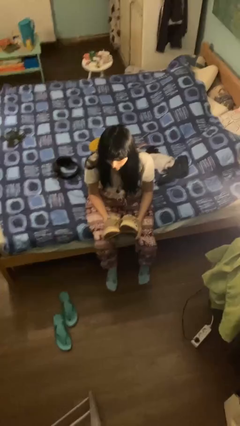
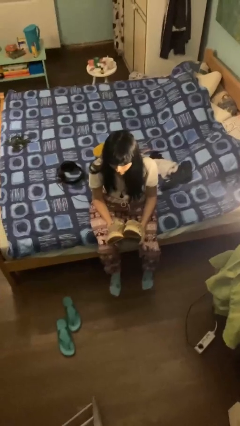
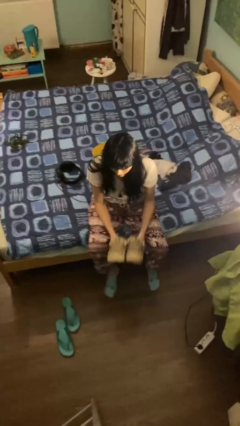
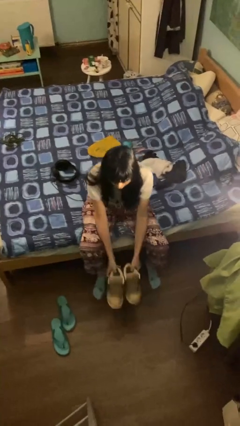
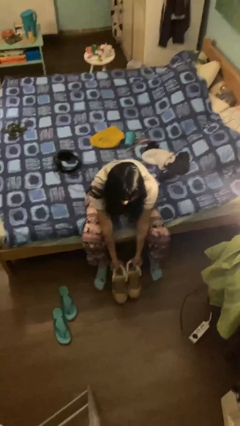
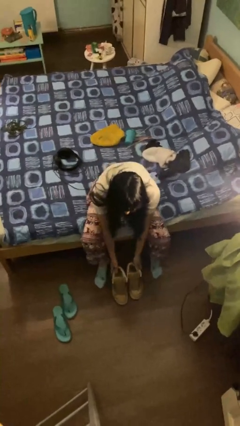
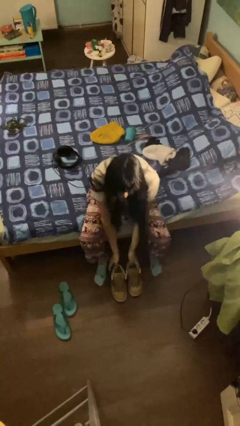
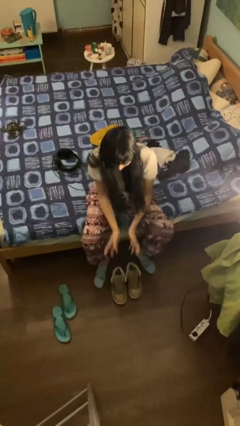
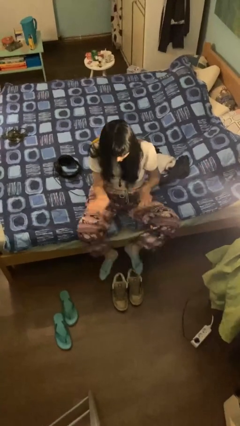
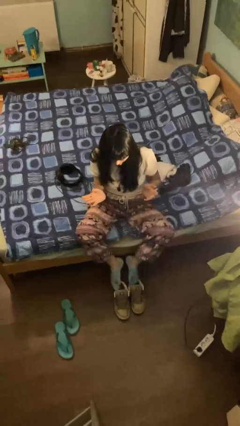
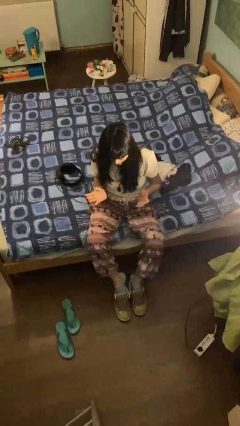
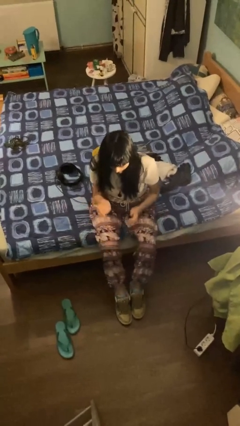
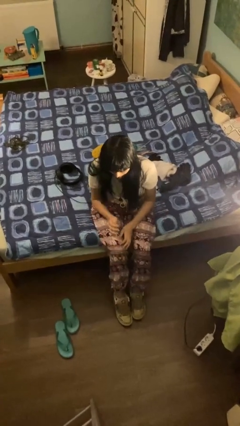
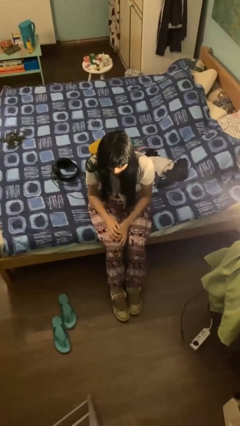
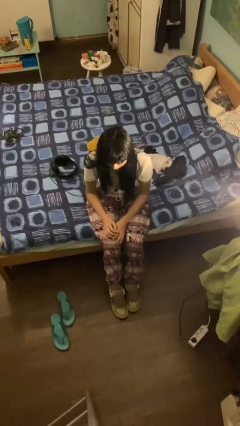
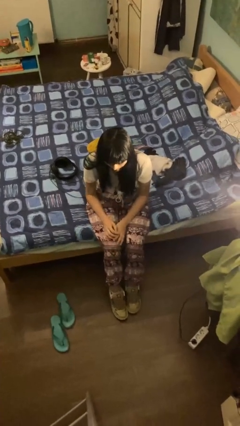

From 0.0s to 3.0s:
person puts on shoes

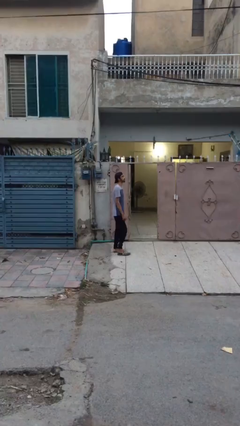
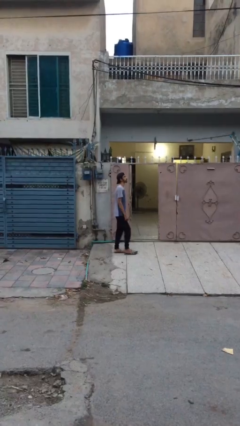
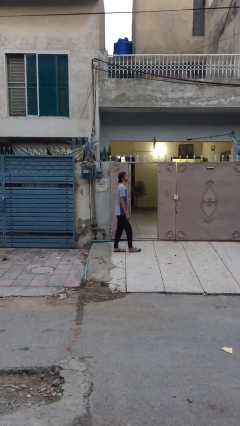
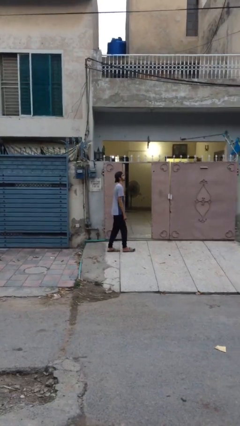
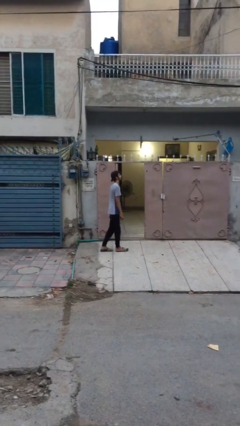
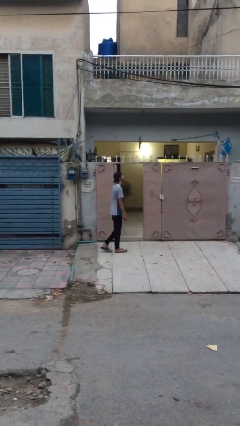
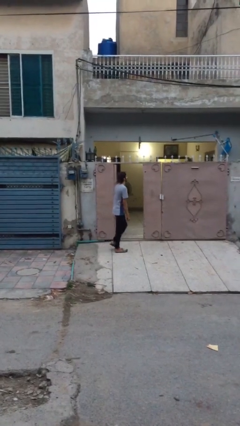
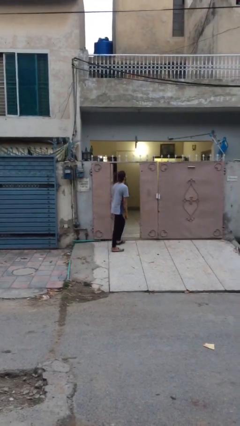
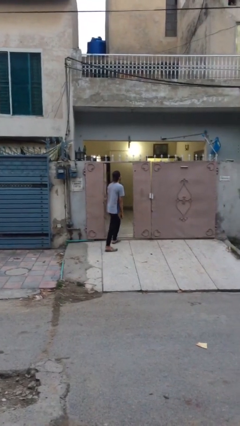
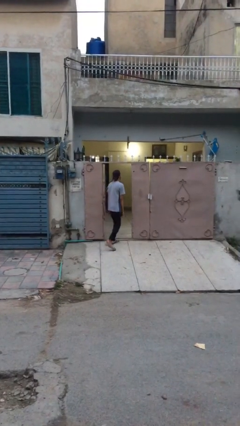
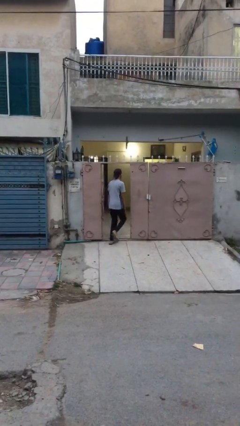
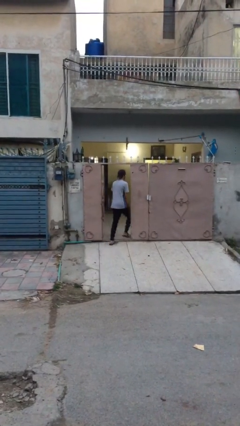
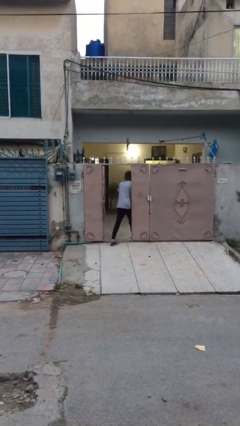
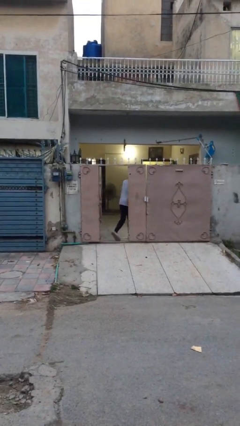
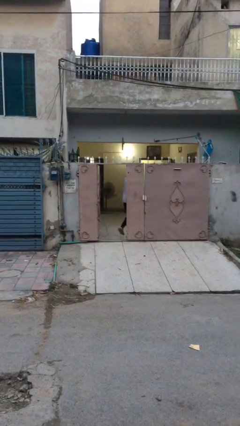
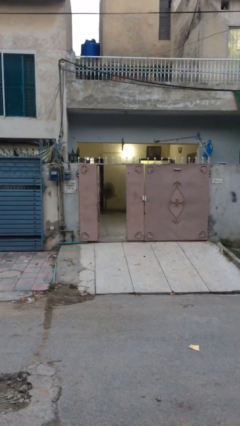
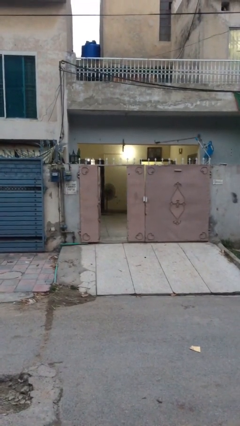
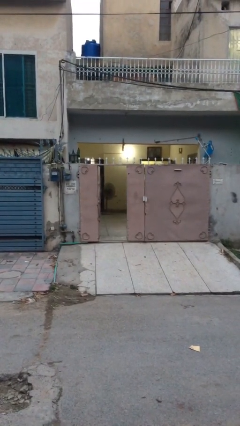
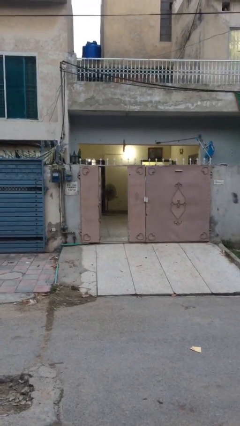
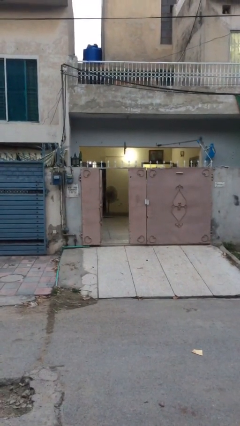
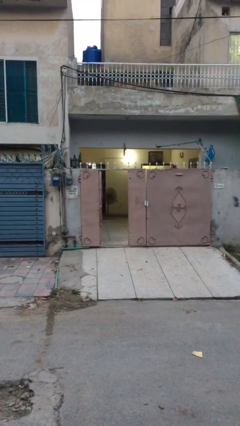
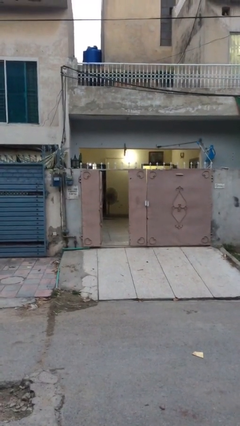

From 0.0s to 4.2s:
person exits scene through structure

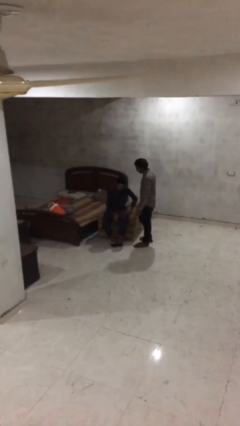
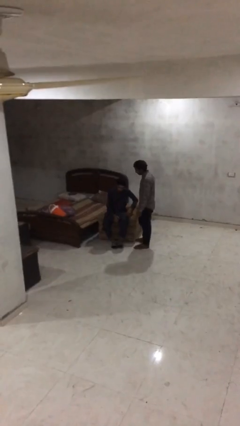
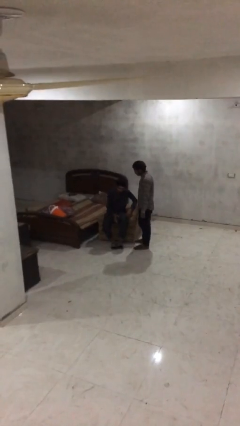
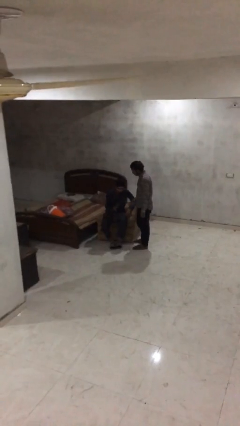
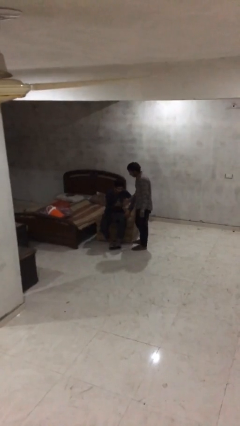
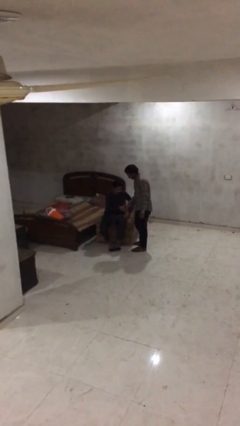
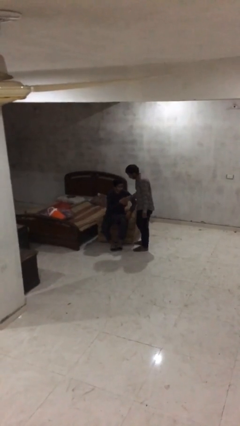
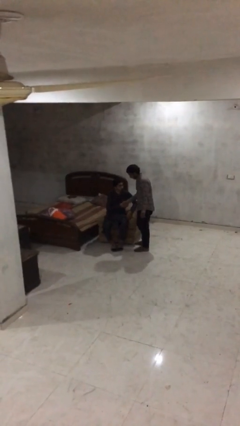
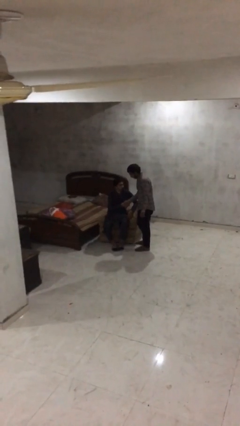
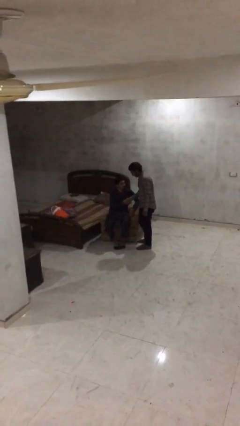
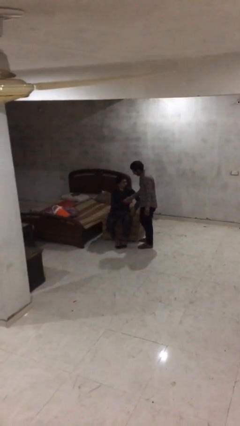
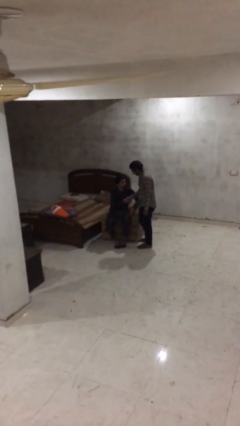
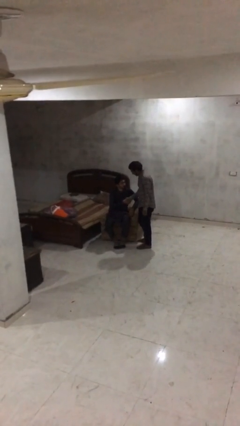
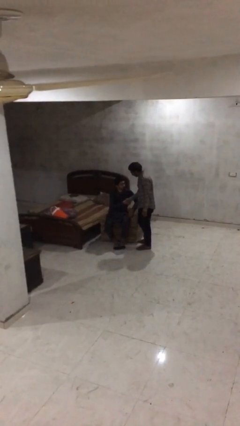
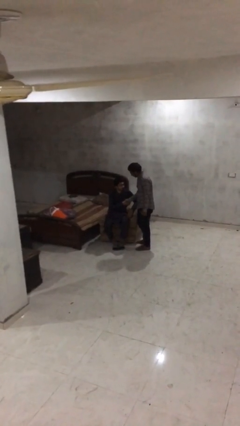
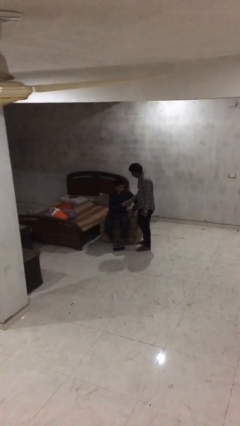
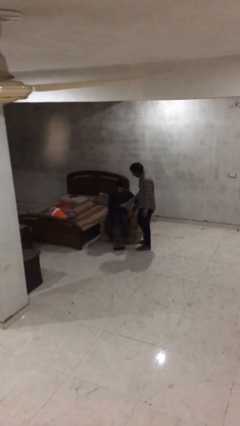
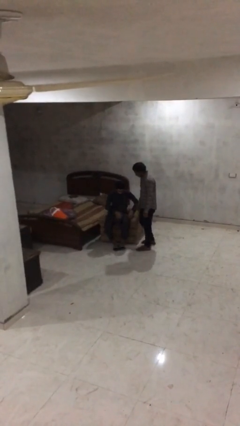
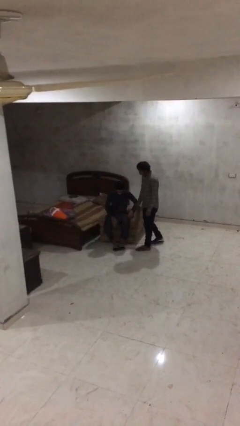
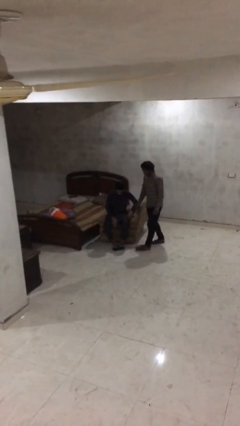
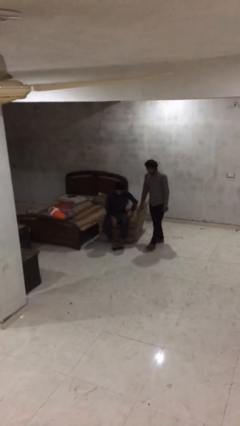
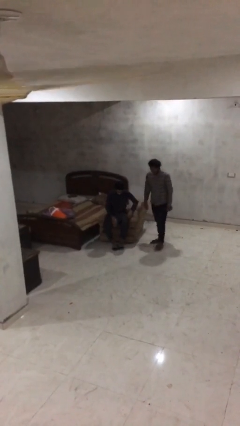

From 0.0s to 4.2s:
person shakes hand

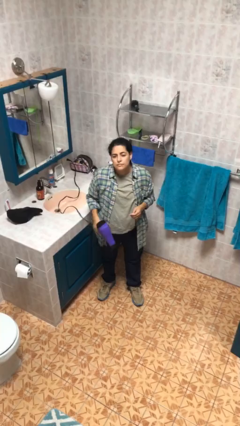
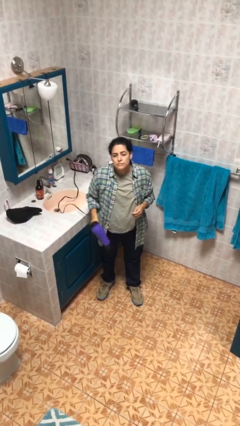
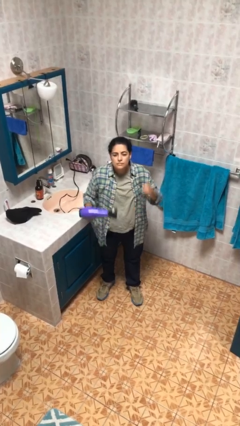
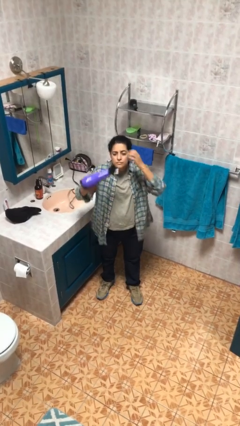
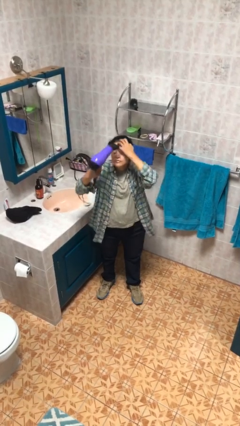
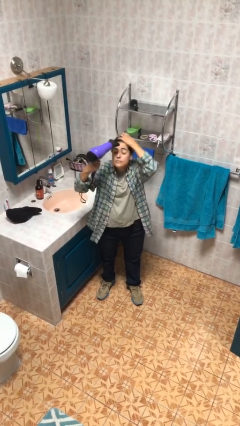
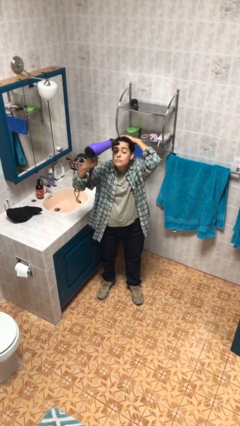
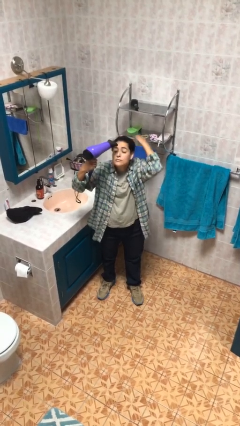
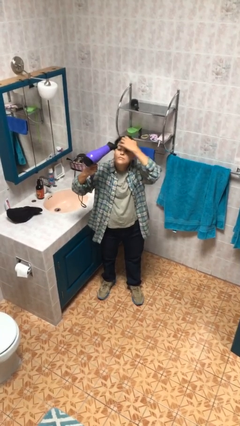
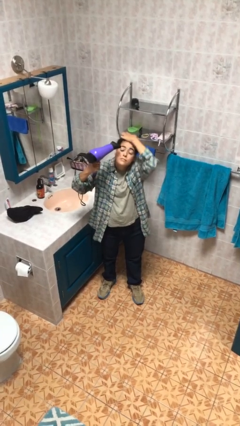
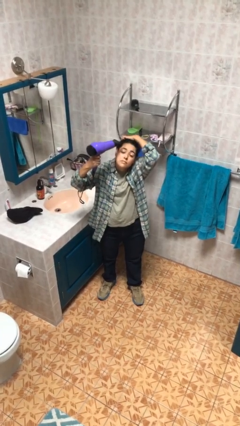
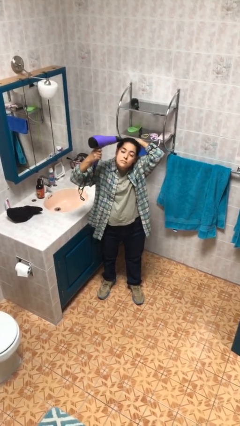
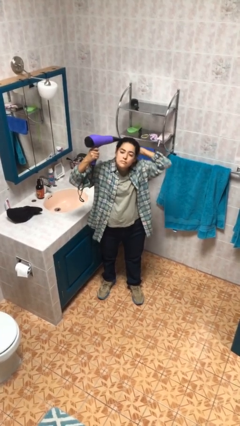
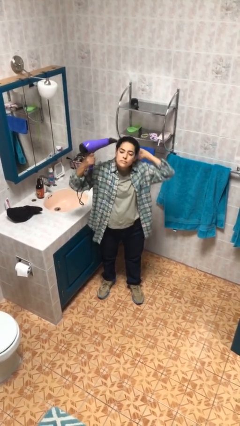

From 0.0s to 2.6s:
person dries hair with hairdryer

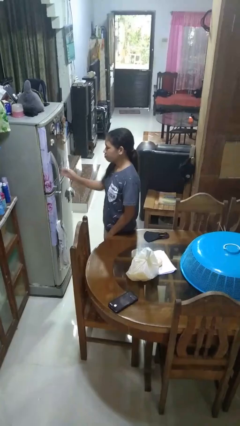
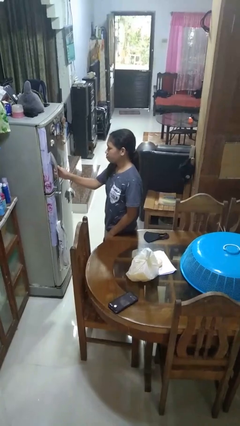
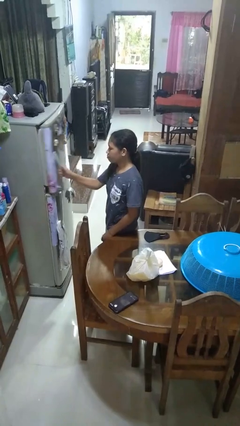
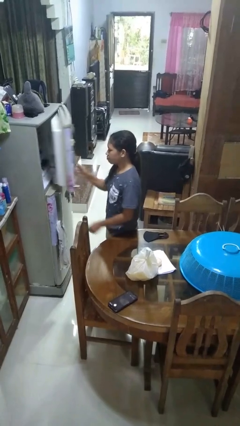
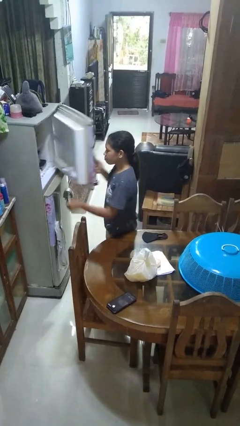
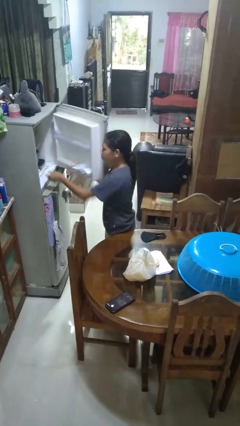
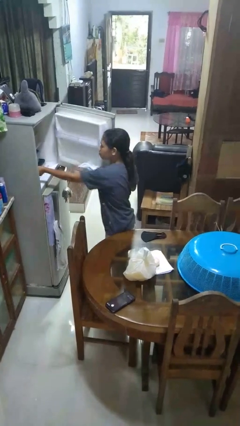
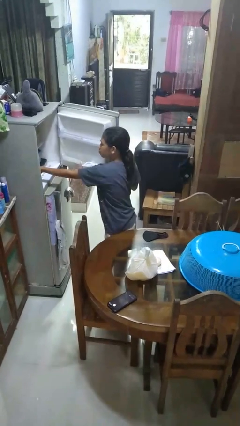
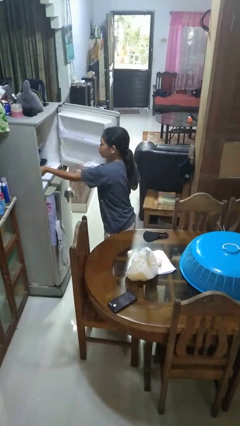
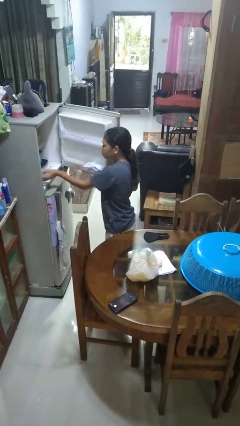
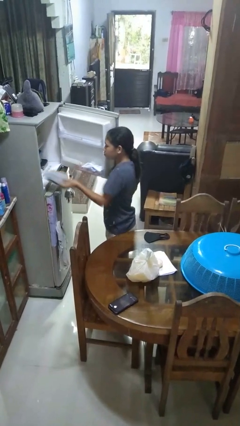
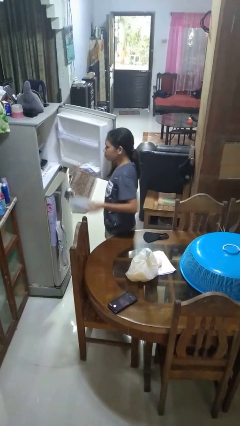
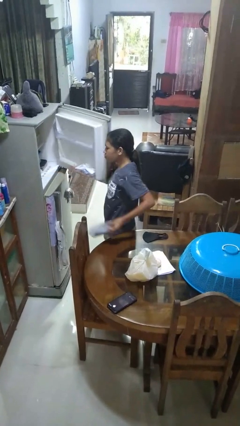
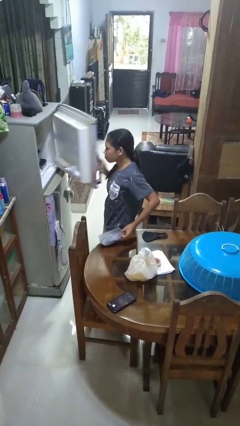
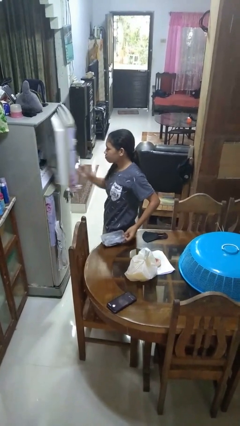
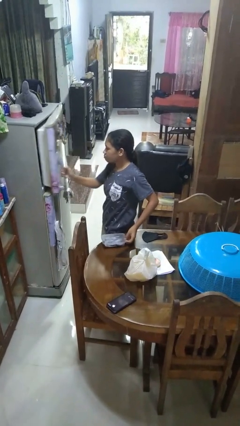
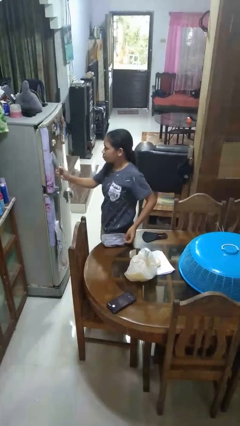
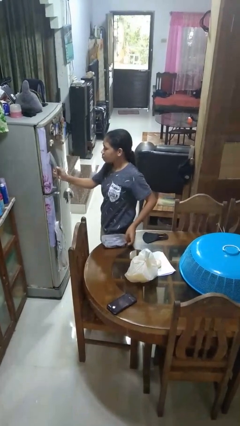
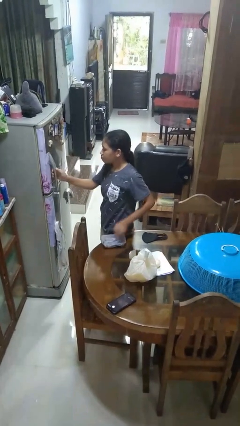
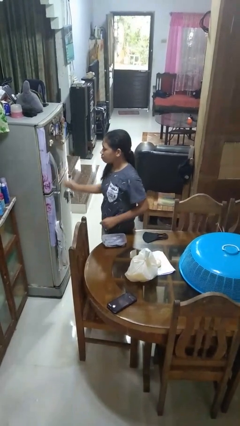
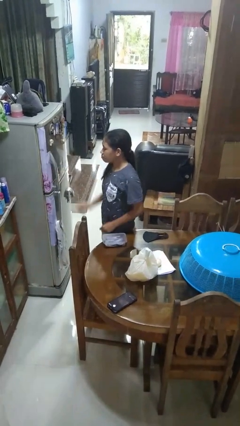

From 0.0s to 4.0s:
person takes object from refrigerator
